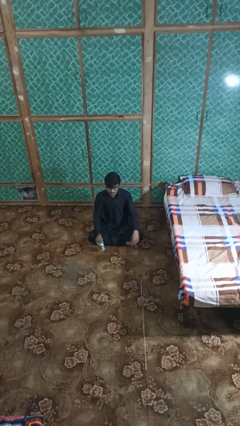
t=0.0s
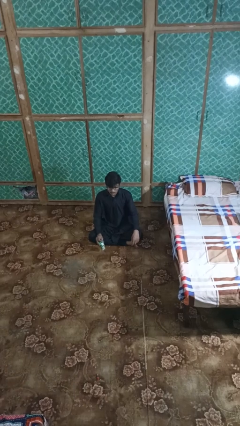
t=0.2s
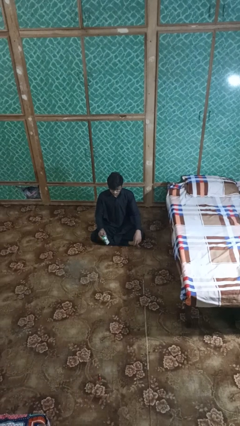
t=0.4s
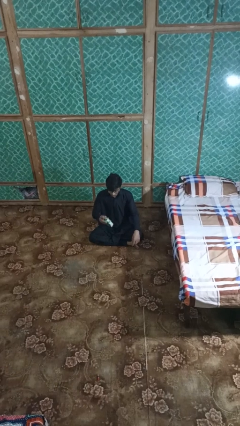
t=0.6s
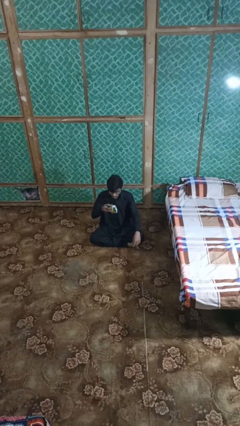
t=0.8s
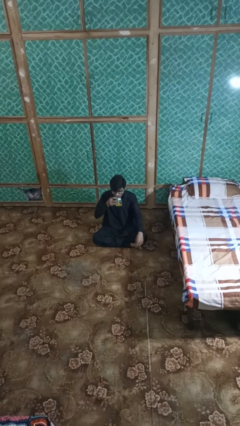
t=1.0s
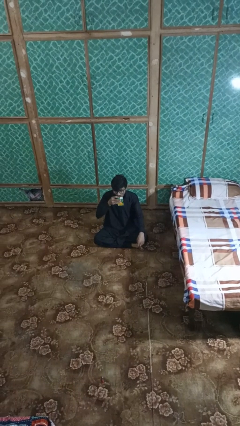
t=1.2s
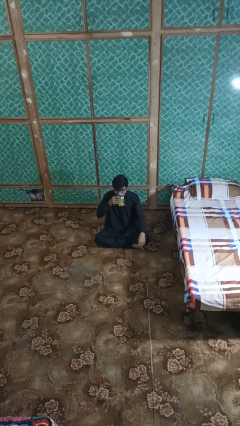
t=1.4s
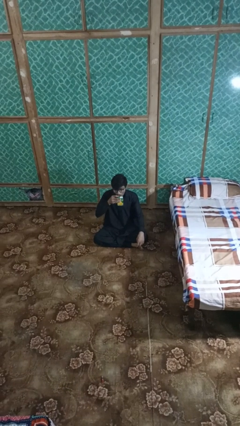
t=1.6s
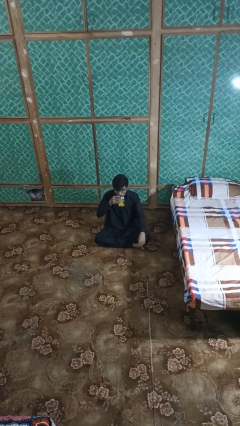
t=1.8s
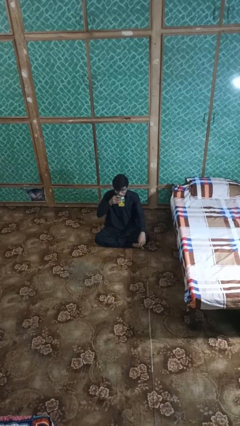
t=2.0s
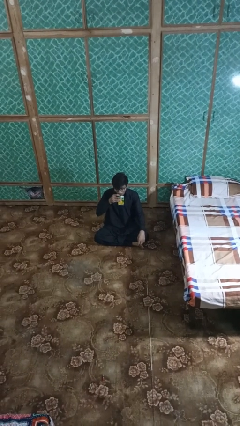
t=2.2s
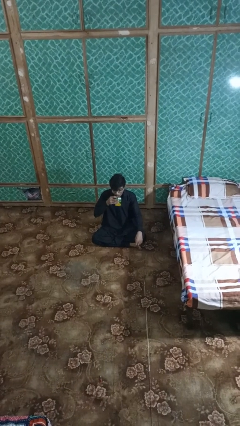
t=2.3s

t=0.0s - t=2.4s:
person drinks from straw

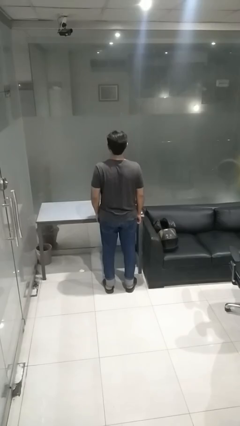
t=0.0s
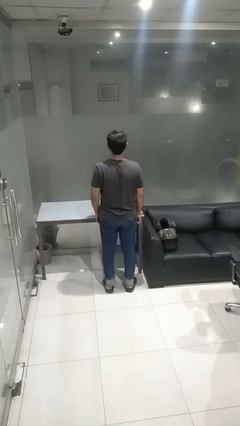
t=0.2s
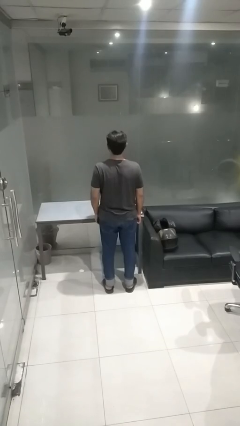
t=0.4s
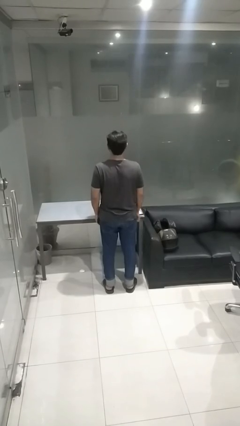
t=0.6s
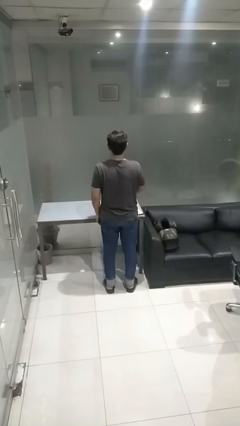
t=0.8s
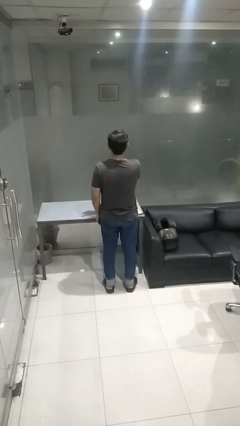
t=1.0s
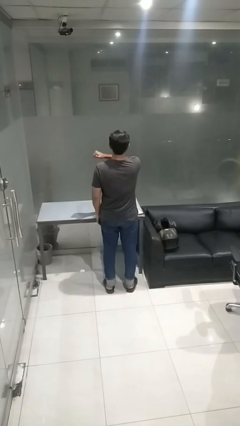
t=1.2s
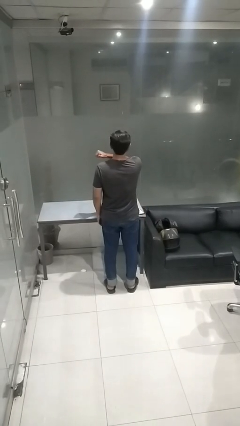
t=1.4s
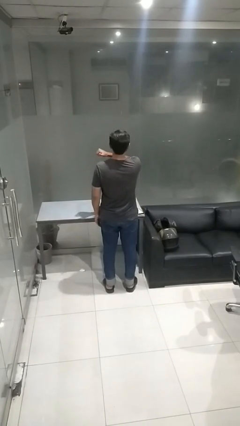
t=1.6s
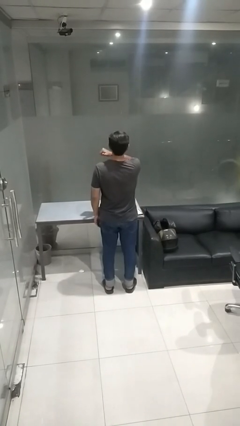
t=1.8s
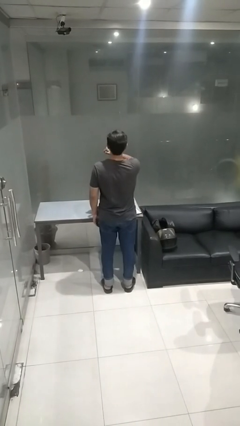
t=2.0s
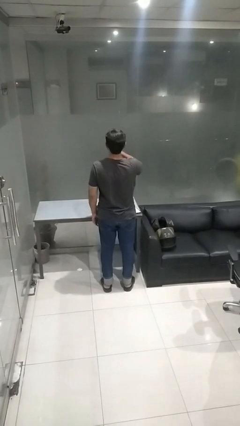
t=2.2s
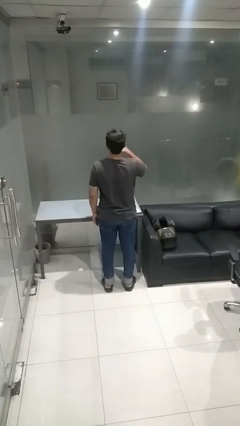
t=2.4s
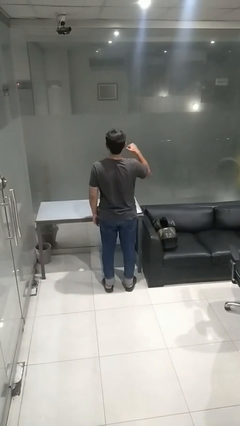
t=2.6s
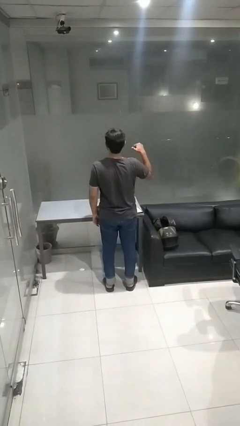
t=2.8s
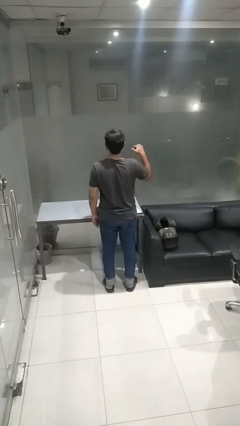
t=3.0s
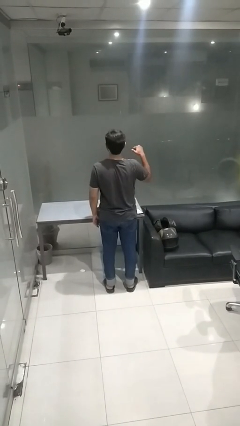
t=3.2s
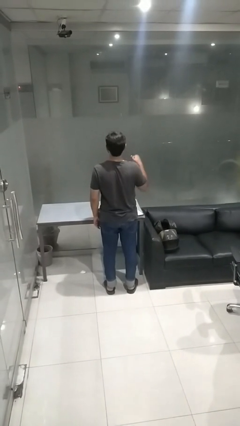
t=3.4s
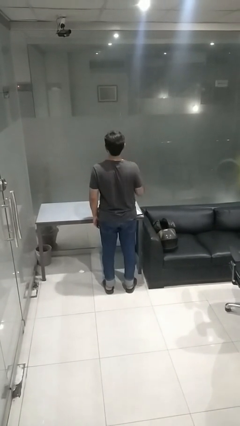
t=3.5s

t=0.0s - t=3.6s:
person gestures cut

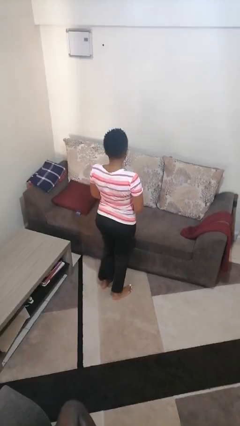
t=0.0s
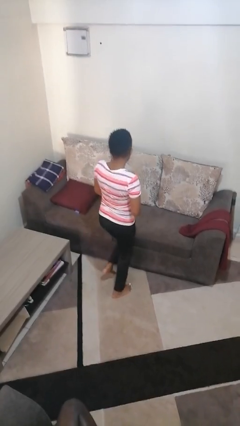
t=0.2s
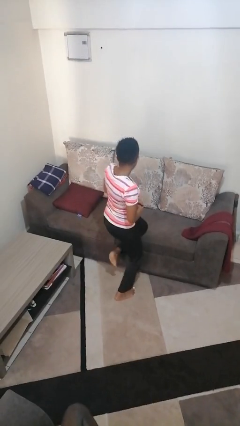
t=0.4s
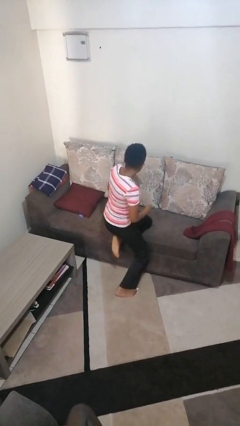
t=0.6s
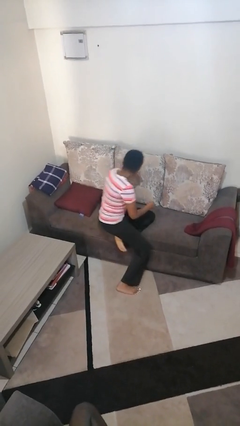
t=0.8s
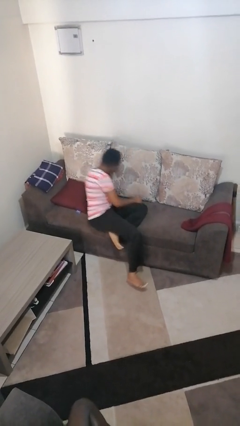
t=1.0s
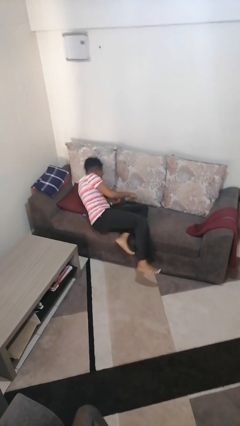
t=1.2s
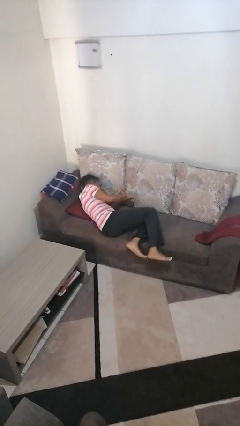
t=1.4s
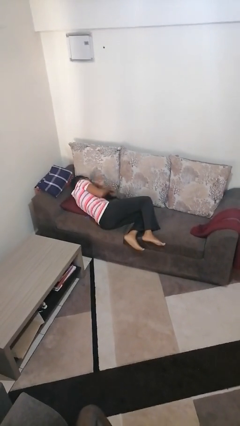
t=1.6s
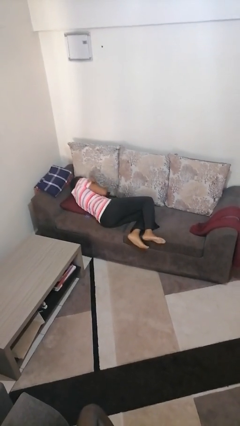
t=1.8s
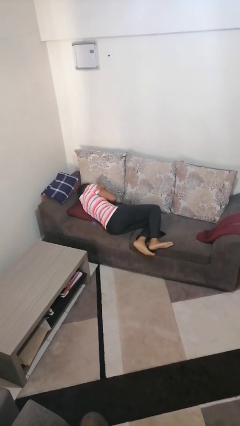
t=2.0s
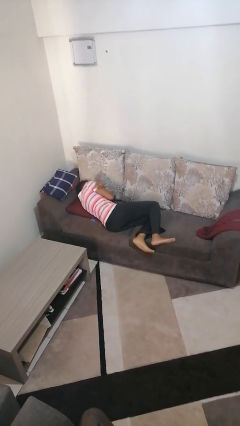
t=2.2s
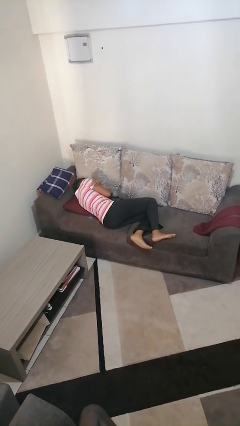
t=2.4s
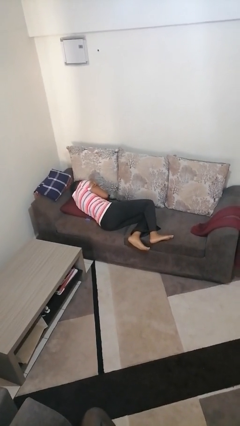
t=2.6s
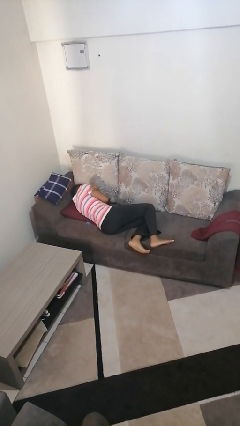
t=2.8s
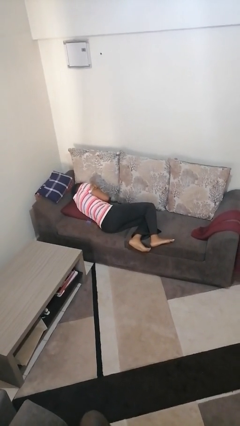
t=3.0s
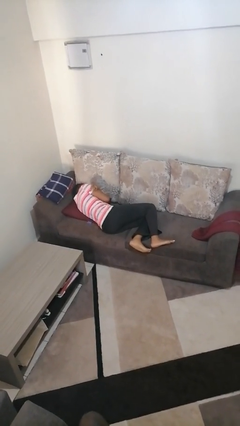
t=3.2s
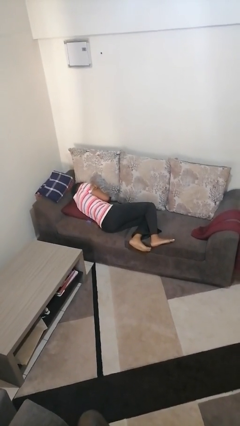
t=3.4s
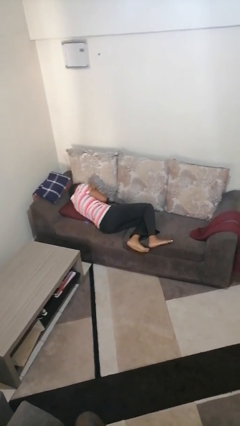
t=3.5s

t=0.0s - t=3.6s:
person lies down on bed

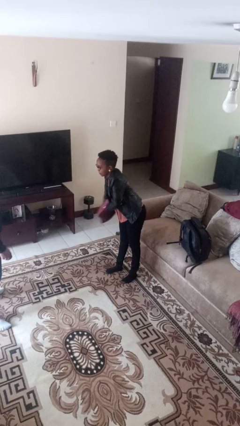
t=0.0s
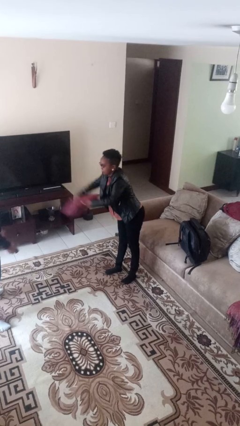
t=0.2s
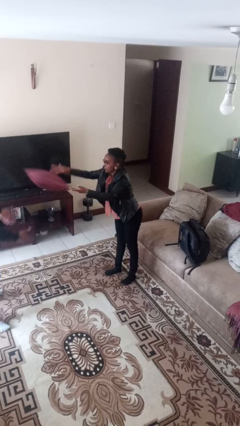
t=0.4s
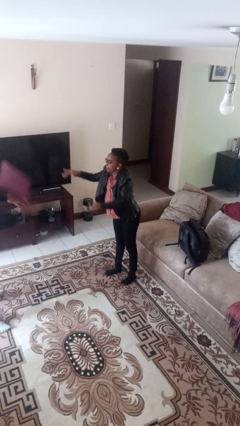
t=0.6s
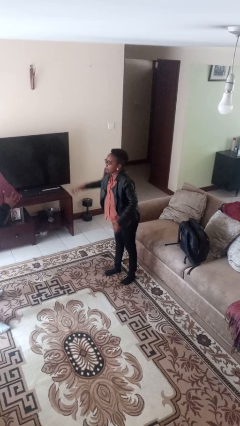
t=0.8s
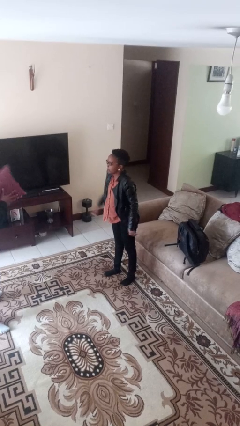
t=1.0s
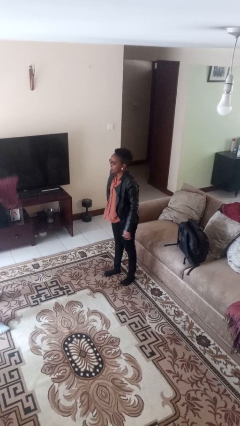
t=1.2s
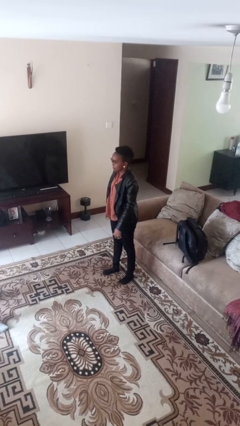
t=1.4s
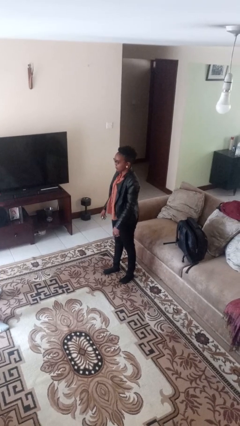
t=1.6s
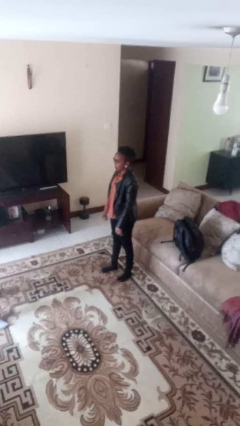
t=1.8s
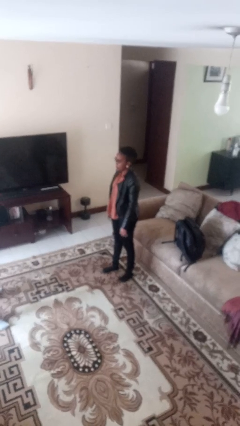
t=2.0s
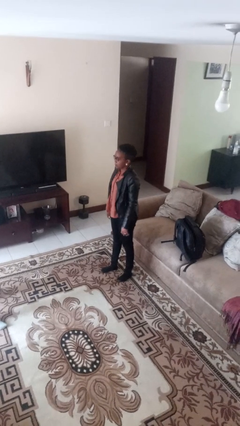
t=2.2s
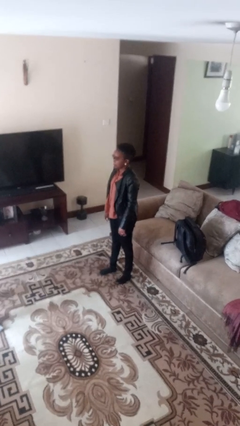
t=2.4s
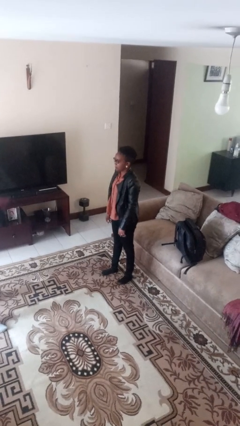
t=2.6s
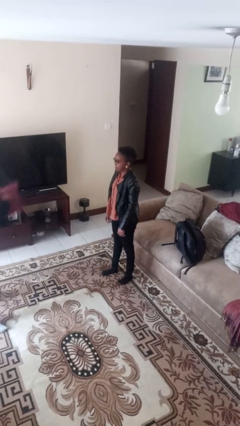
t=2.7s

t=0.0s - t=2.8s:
person throws object to person

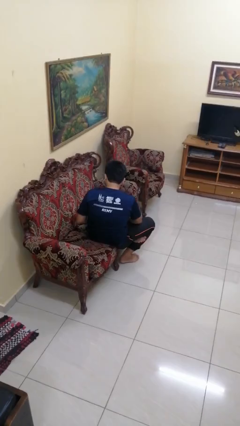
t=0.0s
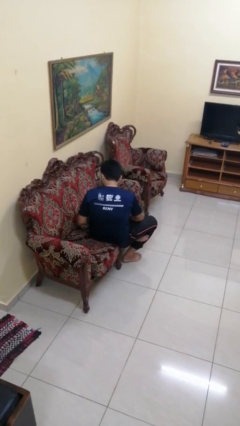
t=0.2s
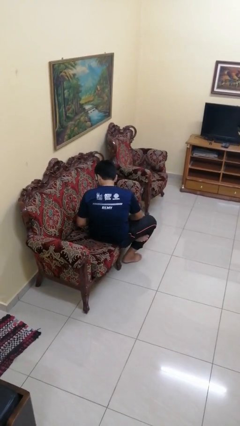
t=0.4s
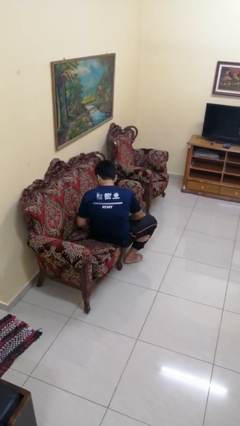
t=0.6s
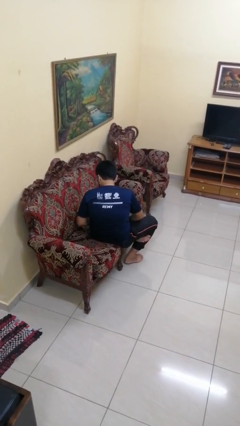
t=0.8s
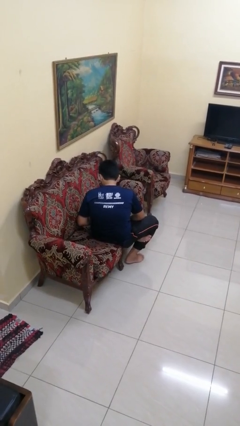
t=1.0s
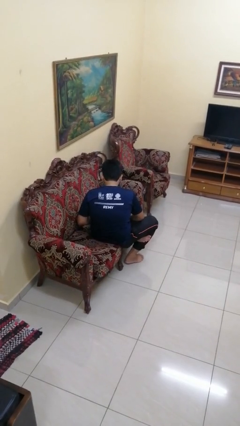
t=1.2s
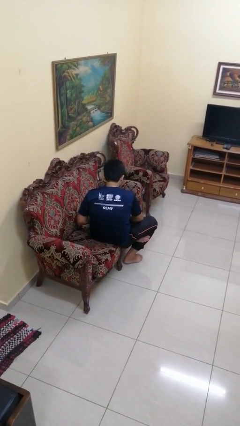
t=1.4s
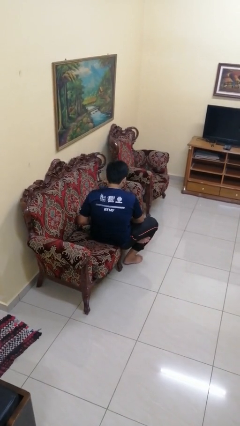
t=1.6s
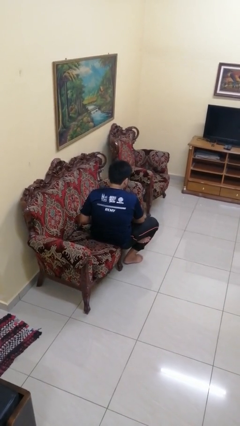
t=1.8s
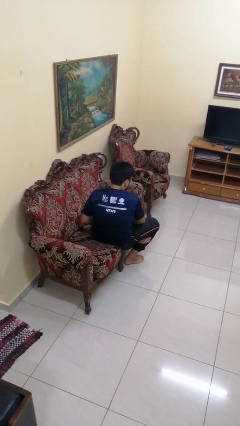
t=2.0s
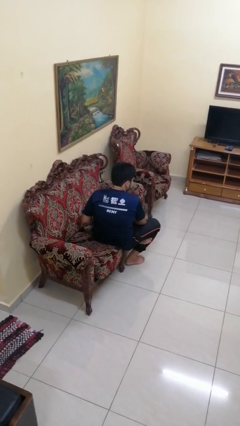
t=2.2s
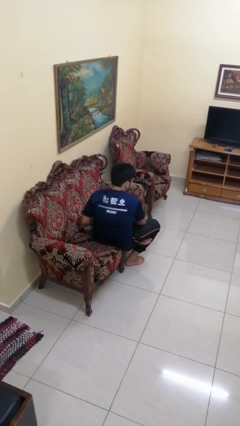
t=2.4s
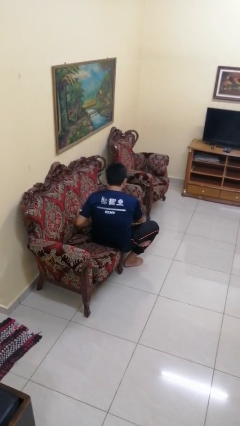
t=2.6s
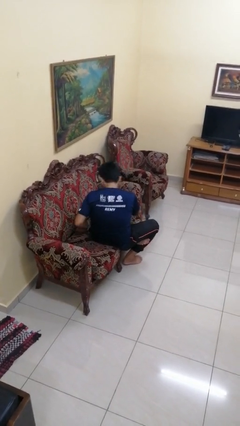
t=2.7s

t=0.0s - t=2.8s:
person searches in couch

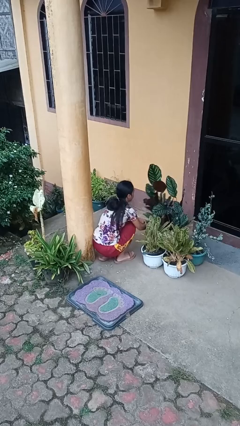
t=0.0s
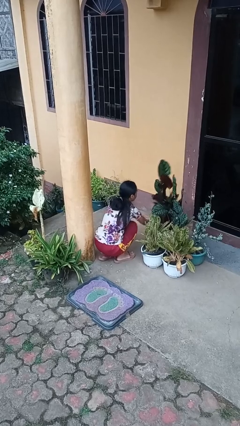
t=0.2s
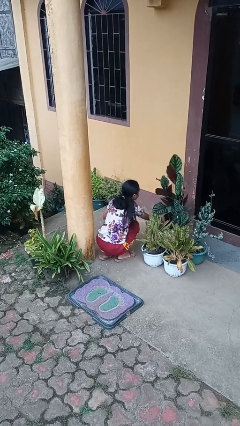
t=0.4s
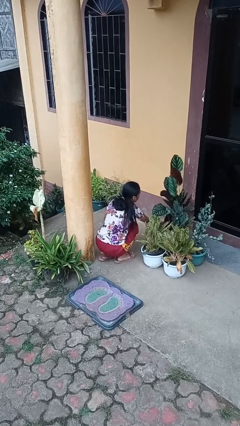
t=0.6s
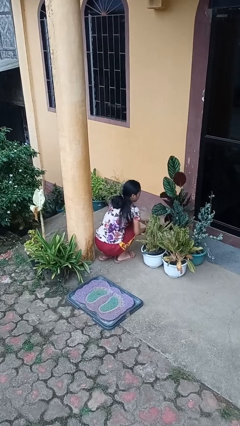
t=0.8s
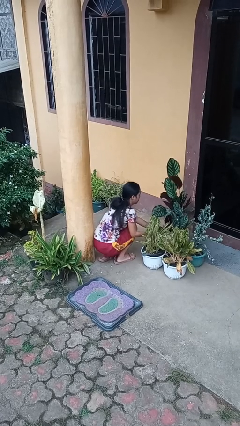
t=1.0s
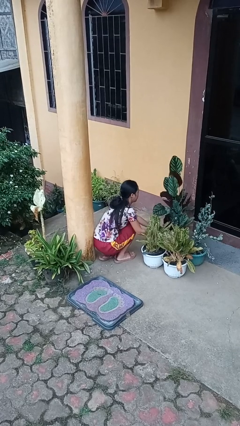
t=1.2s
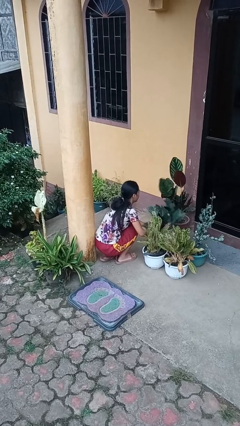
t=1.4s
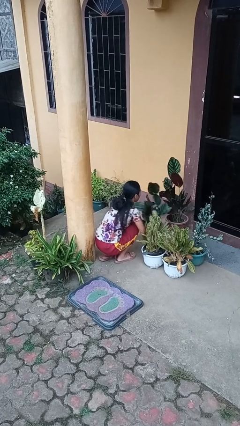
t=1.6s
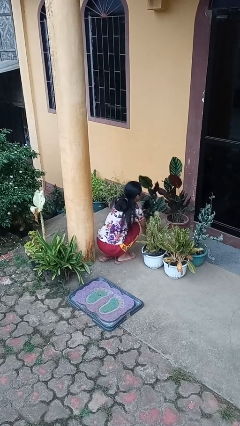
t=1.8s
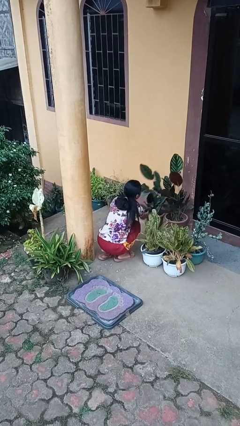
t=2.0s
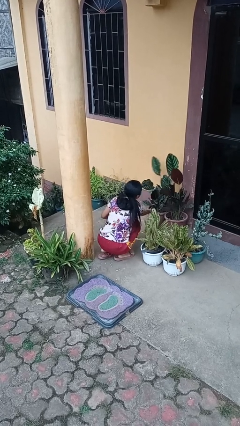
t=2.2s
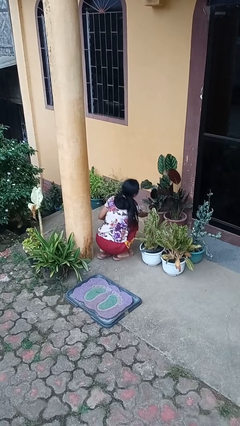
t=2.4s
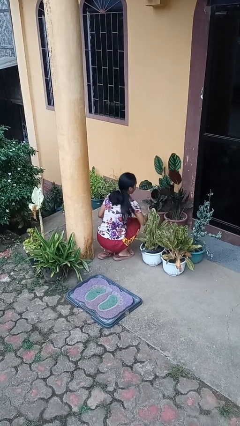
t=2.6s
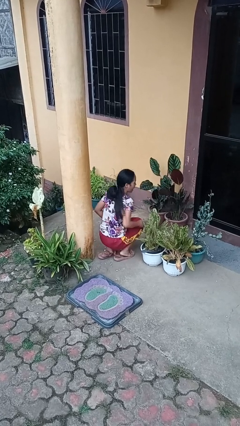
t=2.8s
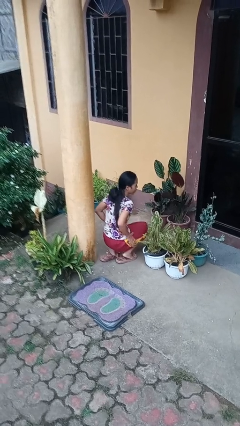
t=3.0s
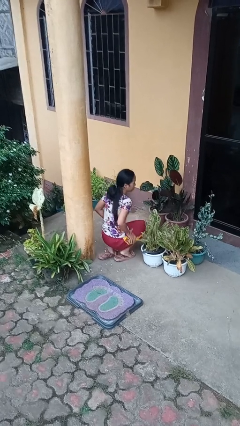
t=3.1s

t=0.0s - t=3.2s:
person arranges flowers in vase
